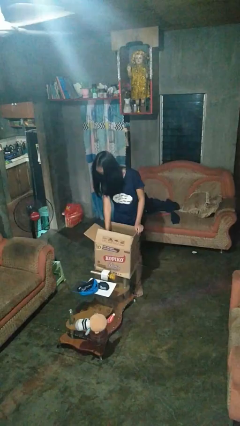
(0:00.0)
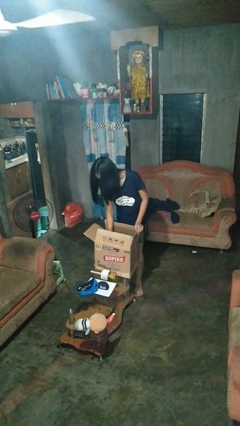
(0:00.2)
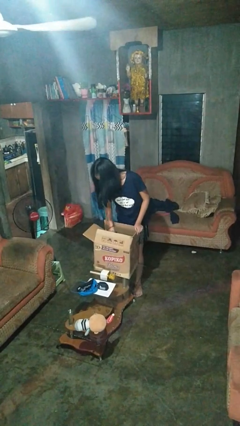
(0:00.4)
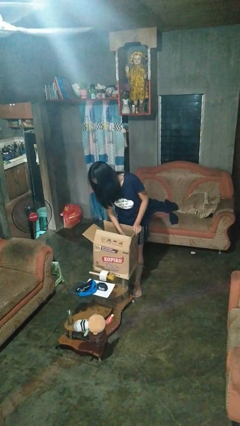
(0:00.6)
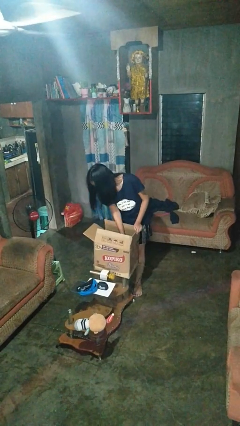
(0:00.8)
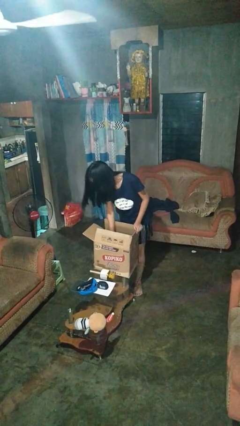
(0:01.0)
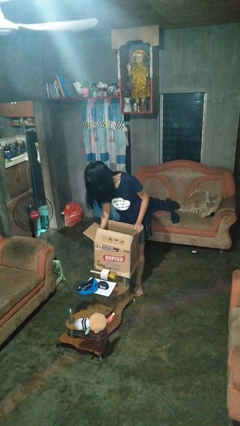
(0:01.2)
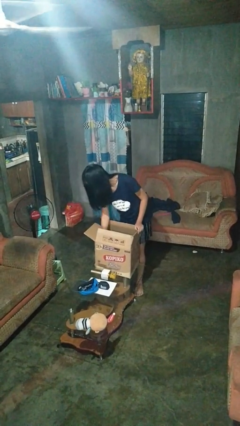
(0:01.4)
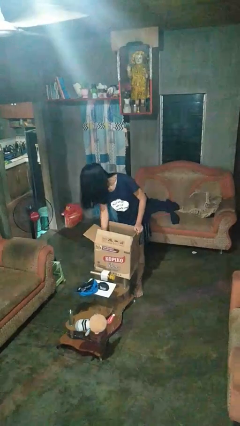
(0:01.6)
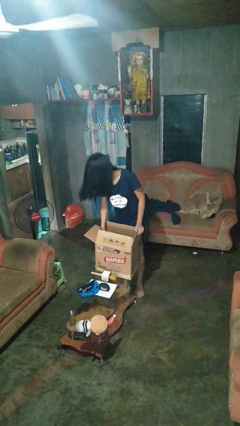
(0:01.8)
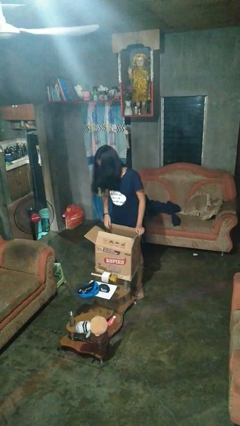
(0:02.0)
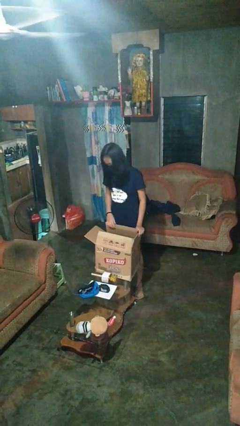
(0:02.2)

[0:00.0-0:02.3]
person searches in box

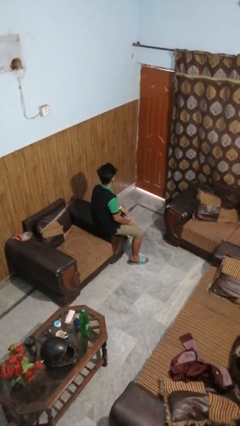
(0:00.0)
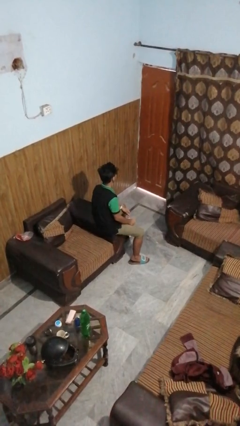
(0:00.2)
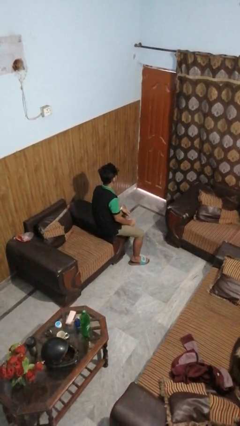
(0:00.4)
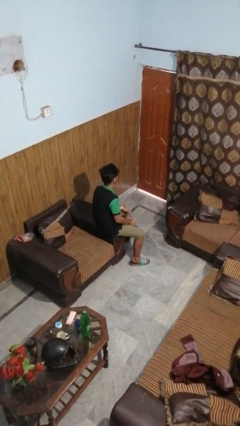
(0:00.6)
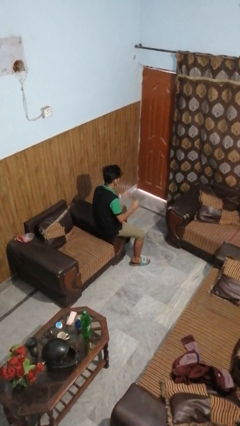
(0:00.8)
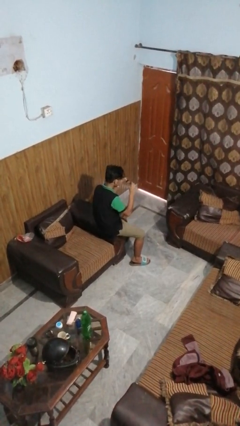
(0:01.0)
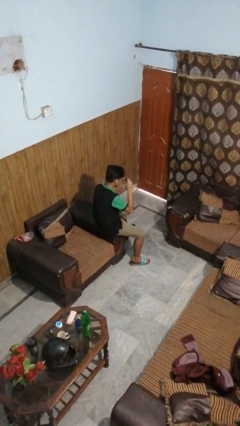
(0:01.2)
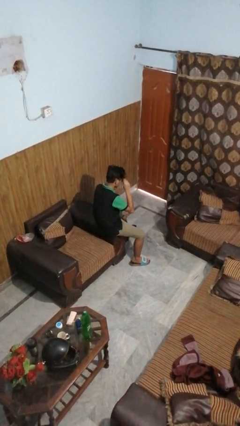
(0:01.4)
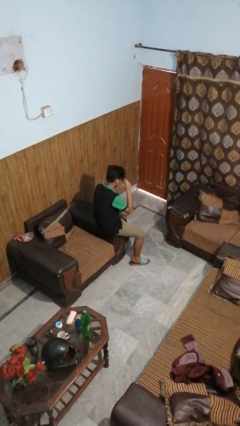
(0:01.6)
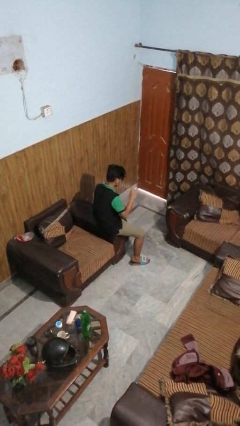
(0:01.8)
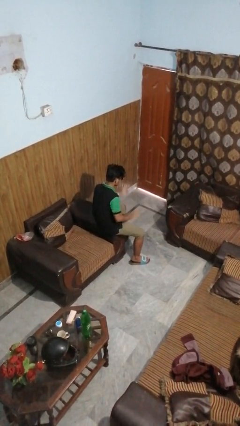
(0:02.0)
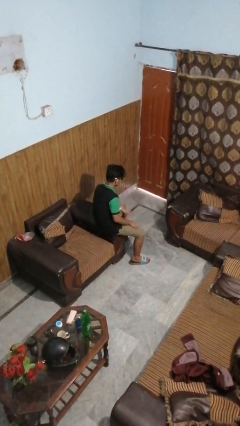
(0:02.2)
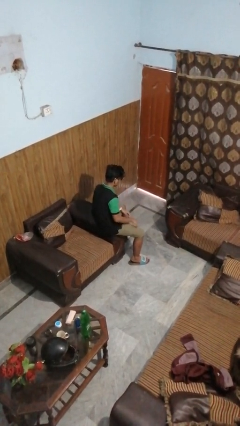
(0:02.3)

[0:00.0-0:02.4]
person puts on sunglasses

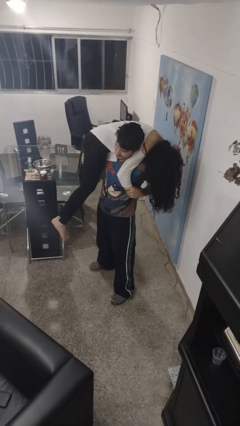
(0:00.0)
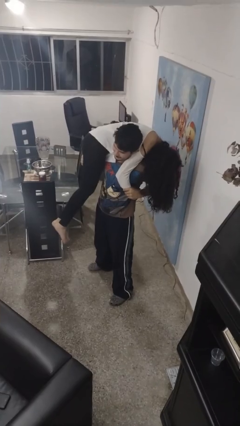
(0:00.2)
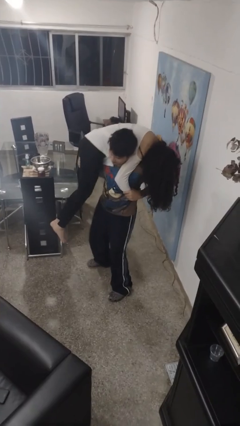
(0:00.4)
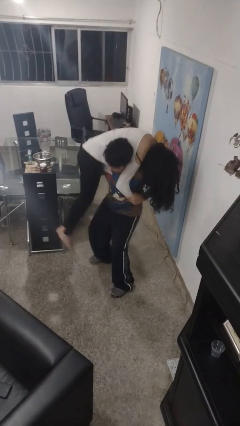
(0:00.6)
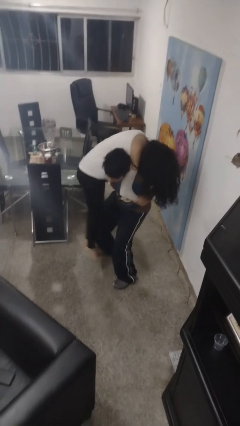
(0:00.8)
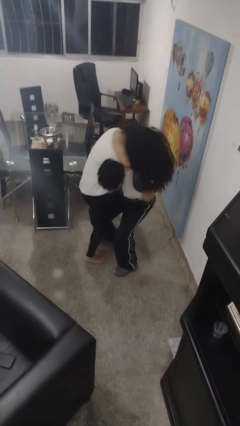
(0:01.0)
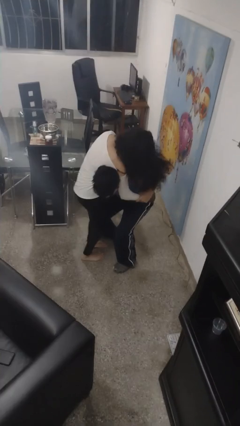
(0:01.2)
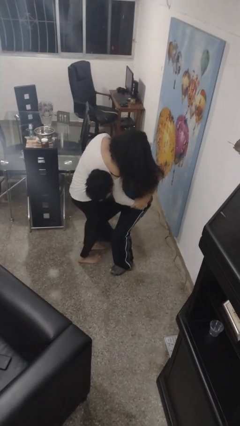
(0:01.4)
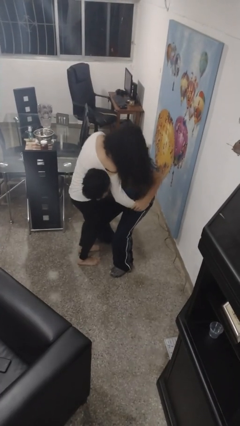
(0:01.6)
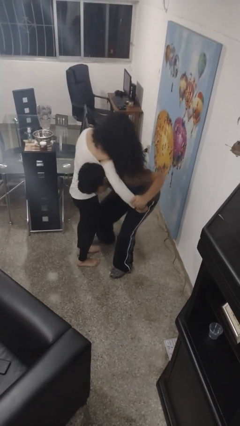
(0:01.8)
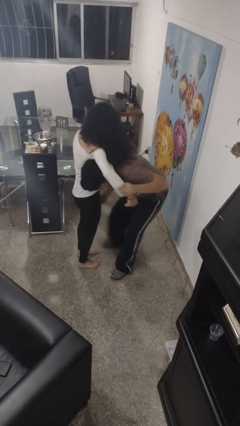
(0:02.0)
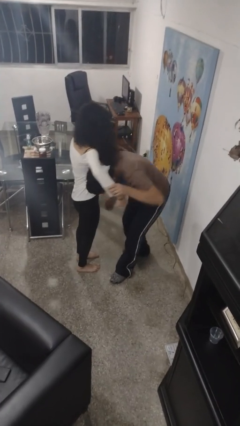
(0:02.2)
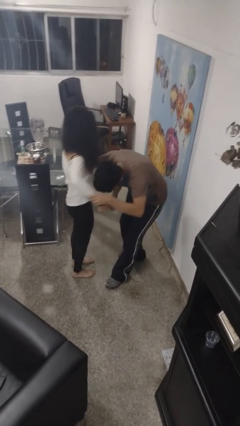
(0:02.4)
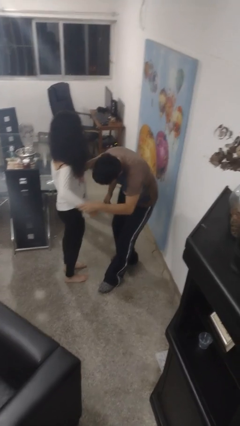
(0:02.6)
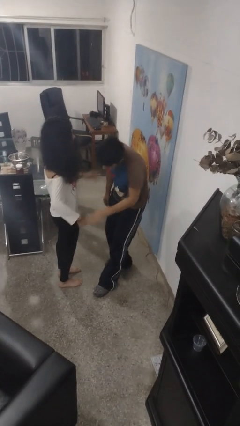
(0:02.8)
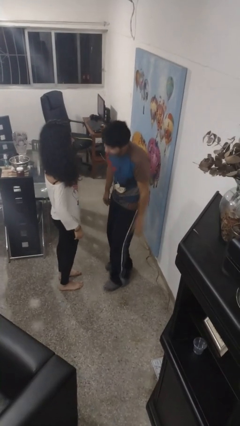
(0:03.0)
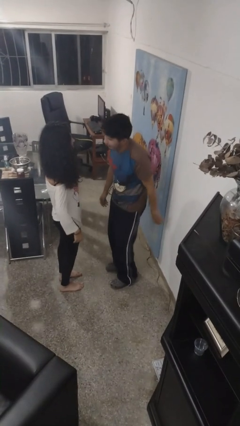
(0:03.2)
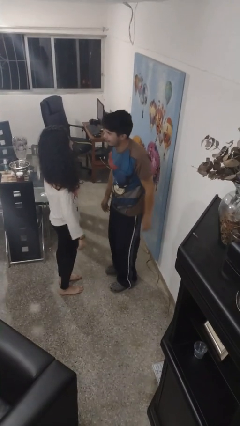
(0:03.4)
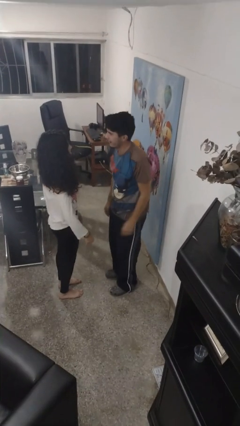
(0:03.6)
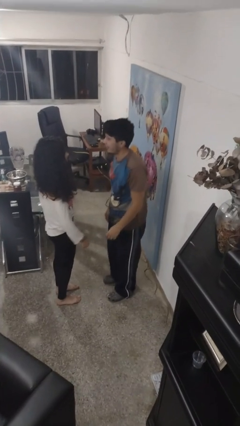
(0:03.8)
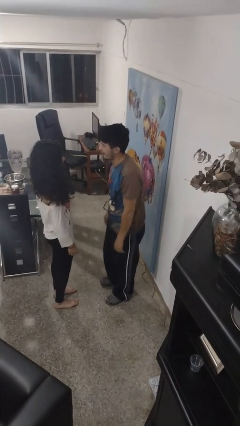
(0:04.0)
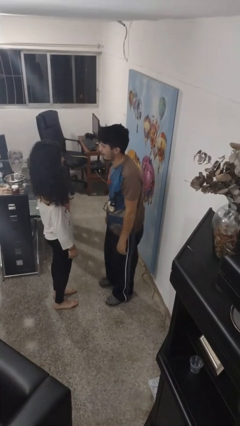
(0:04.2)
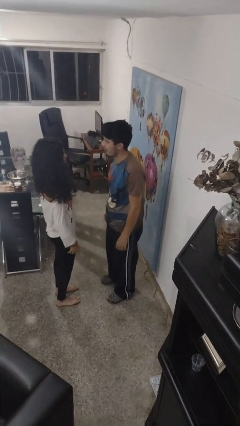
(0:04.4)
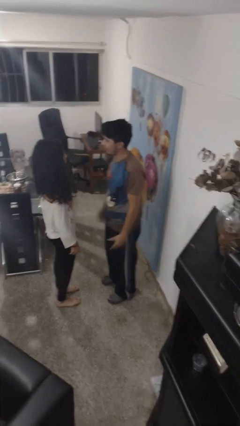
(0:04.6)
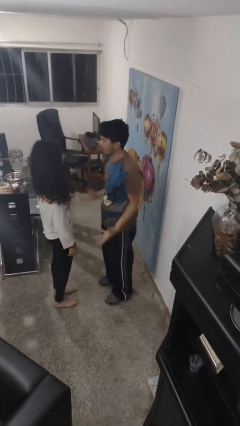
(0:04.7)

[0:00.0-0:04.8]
person puts down person

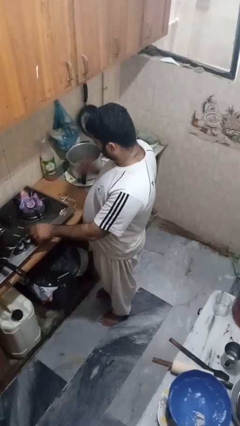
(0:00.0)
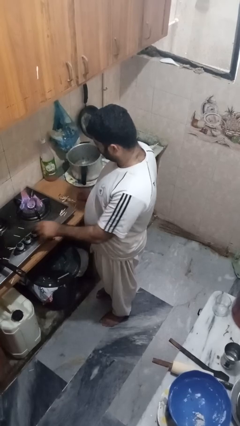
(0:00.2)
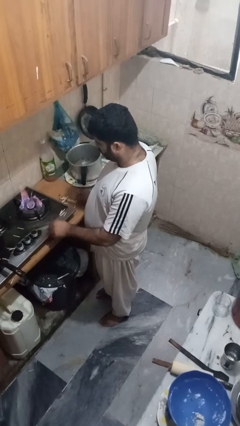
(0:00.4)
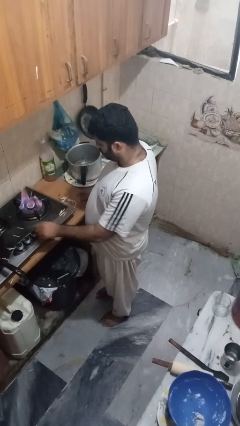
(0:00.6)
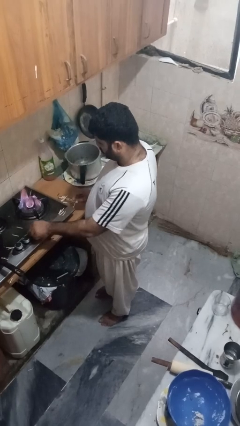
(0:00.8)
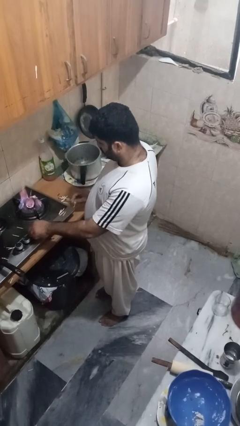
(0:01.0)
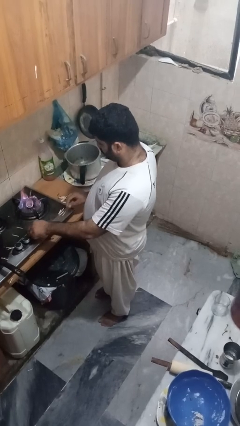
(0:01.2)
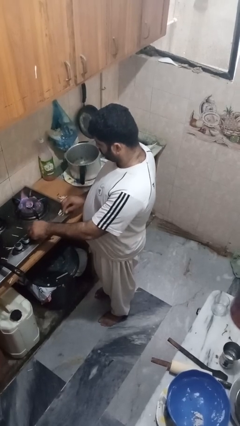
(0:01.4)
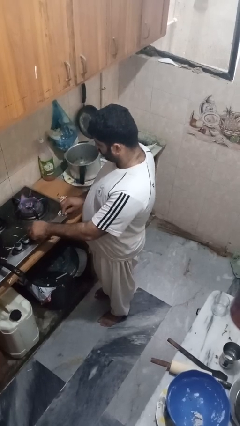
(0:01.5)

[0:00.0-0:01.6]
person turns off stovetop

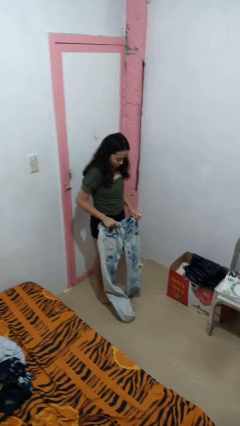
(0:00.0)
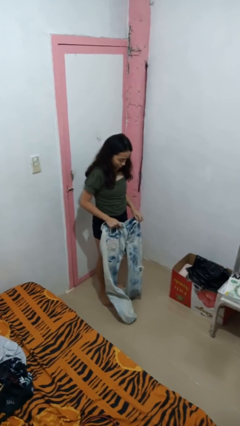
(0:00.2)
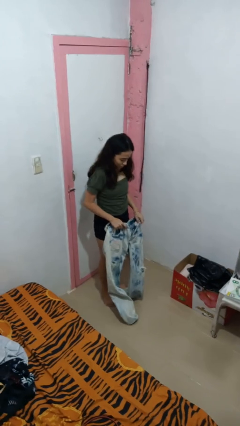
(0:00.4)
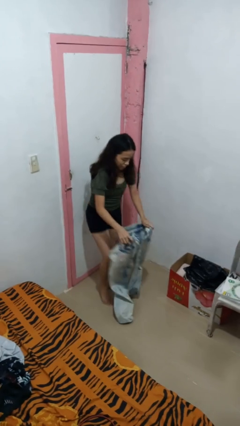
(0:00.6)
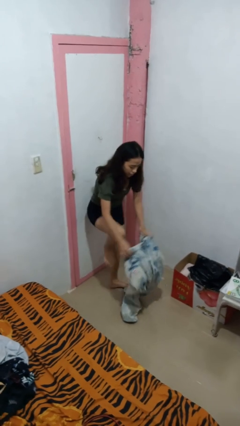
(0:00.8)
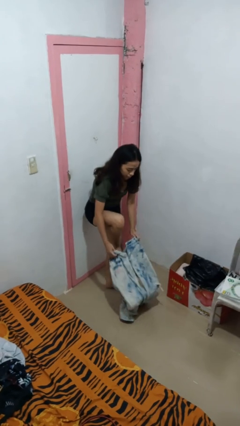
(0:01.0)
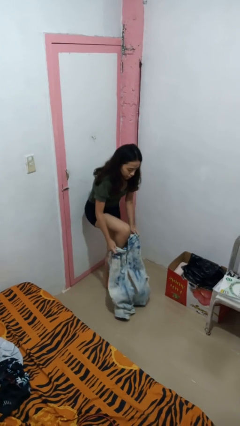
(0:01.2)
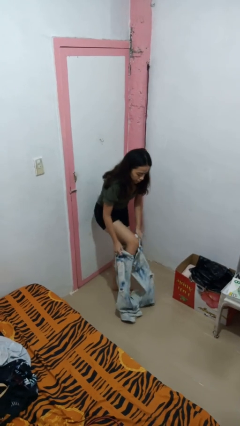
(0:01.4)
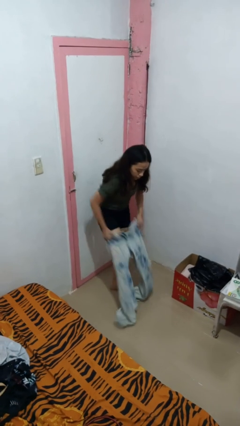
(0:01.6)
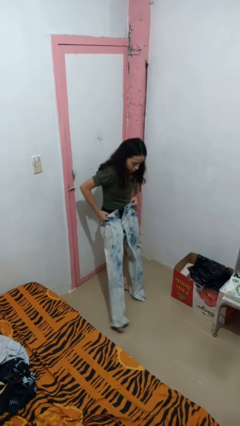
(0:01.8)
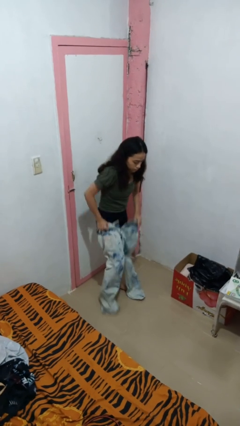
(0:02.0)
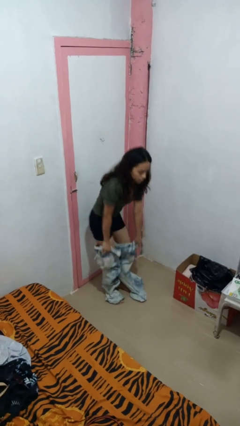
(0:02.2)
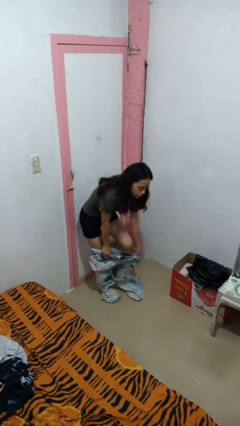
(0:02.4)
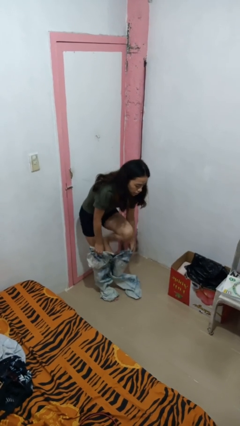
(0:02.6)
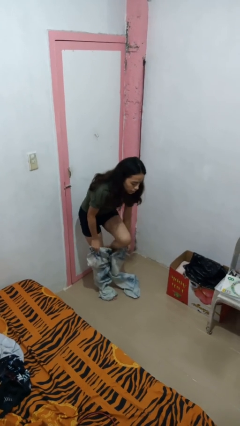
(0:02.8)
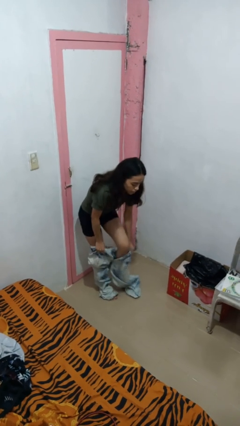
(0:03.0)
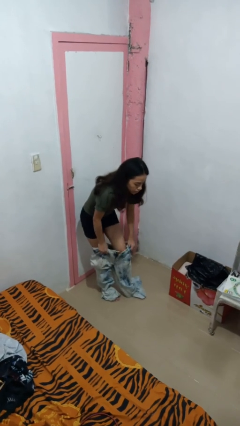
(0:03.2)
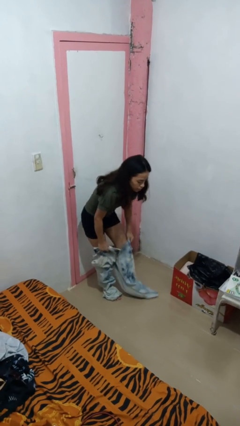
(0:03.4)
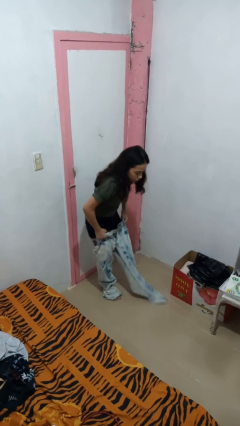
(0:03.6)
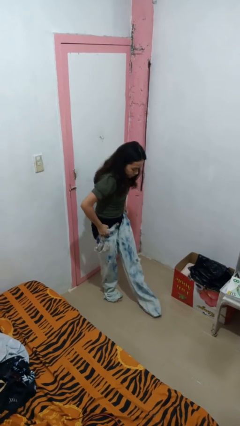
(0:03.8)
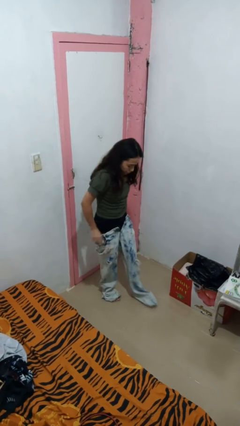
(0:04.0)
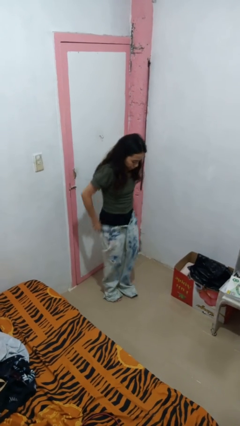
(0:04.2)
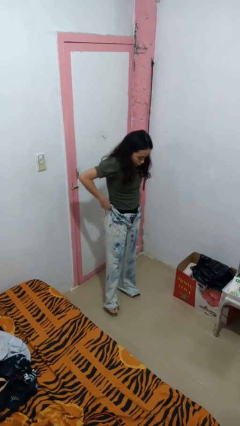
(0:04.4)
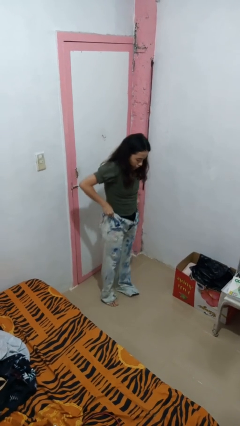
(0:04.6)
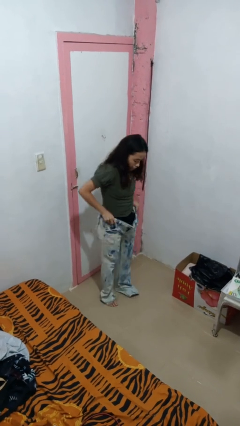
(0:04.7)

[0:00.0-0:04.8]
person puts on pants

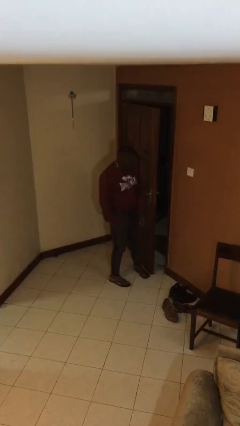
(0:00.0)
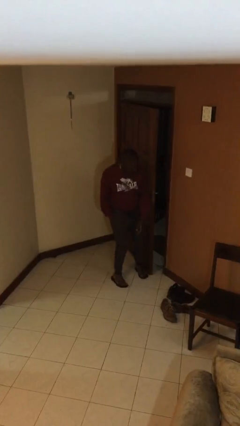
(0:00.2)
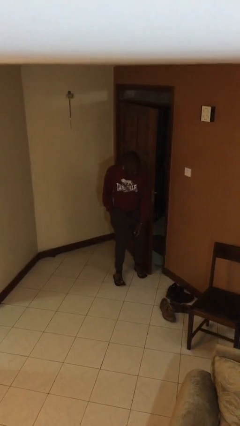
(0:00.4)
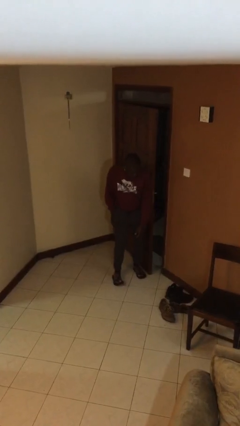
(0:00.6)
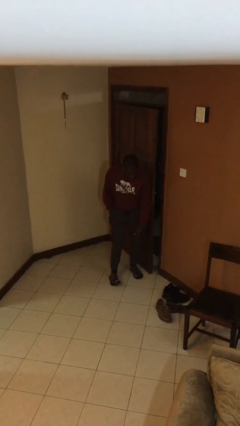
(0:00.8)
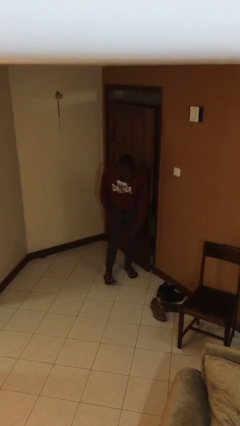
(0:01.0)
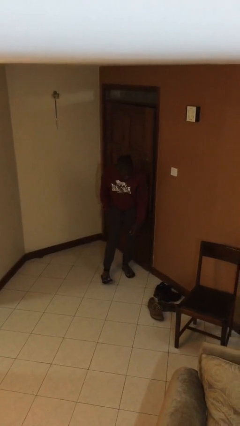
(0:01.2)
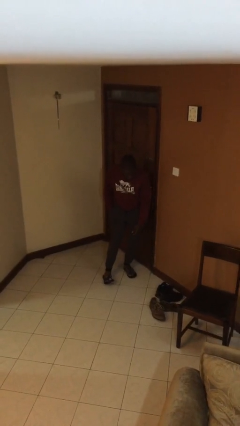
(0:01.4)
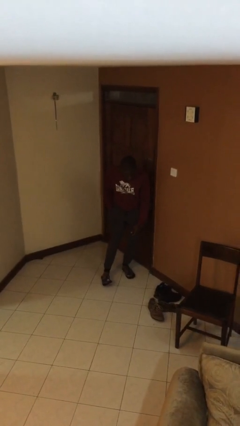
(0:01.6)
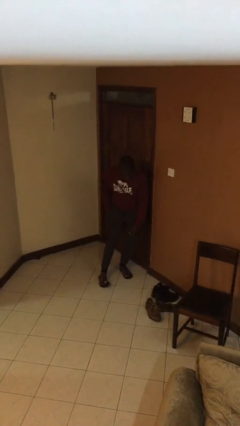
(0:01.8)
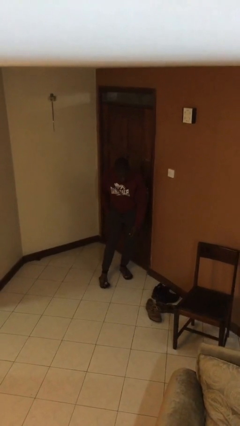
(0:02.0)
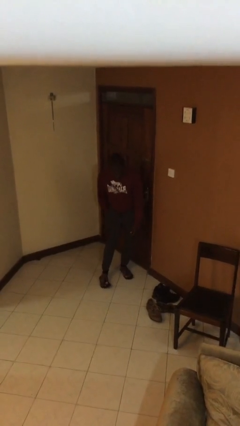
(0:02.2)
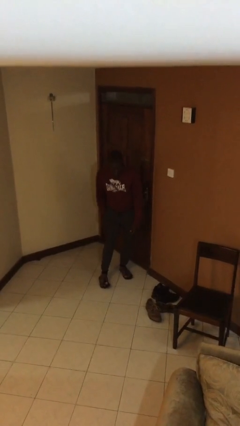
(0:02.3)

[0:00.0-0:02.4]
person closes door with hip
